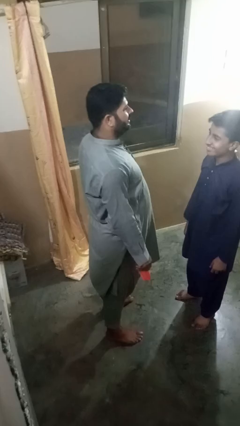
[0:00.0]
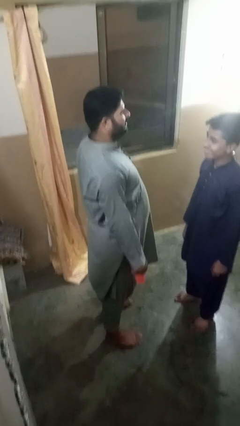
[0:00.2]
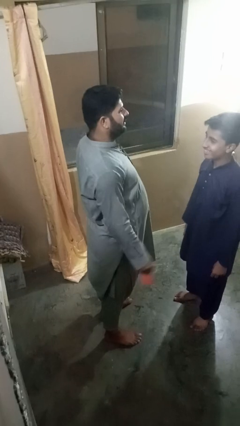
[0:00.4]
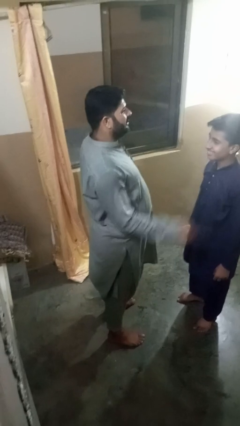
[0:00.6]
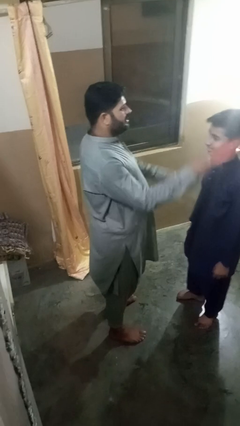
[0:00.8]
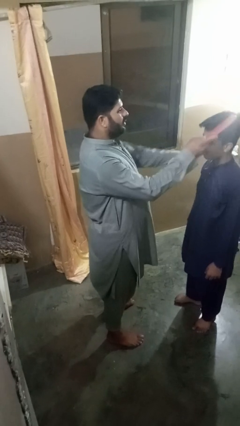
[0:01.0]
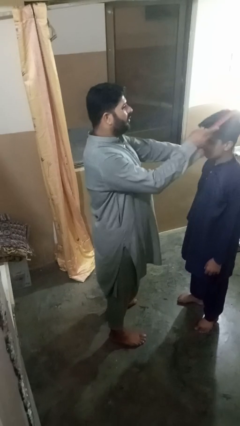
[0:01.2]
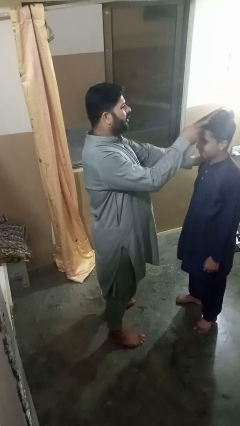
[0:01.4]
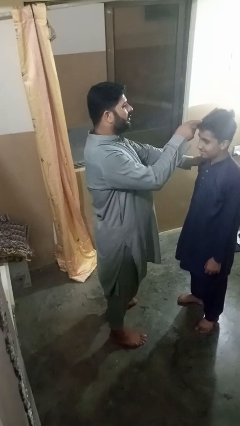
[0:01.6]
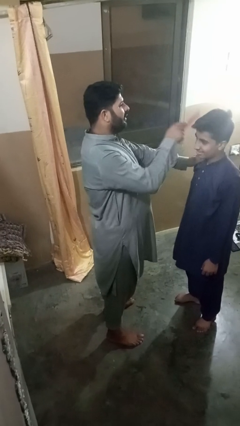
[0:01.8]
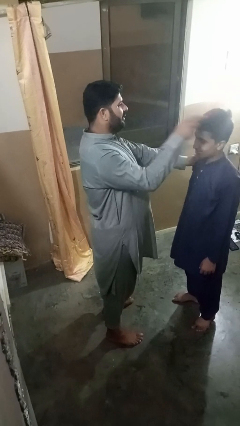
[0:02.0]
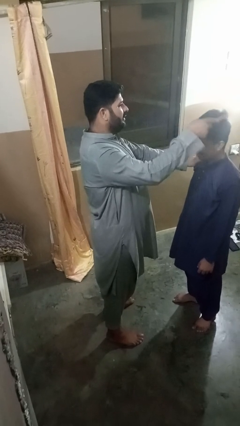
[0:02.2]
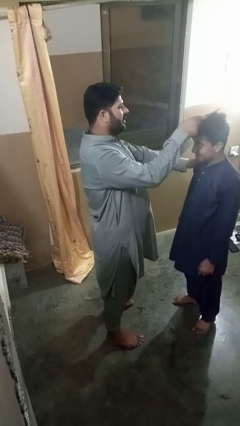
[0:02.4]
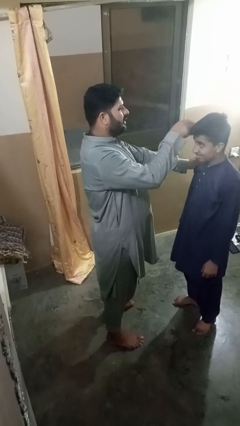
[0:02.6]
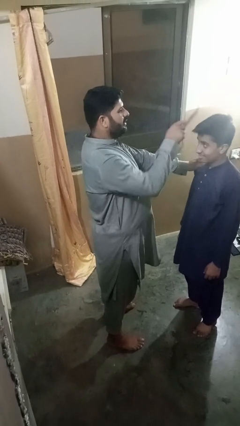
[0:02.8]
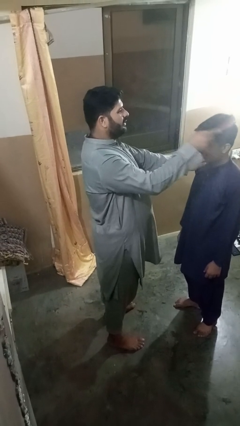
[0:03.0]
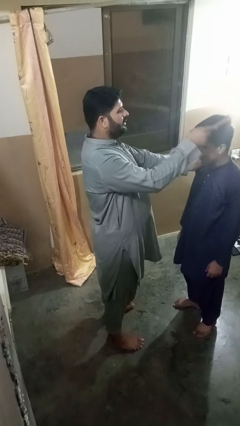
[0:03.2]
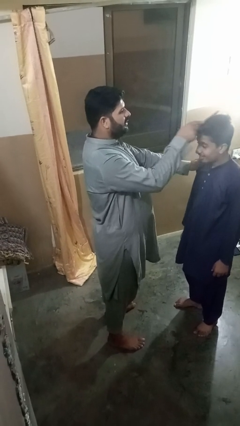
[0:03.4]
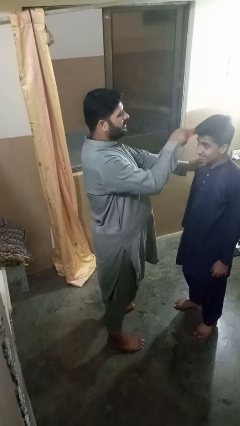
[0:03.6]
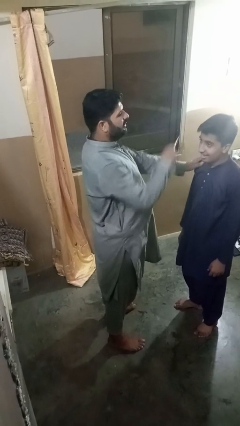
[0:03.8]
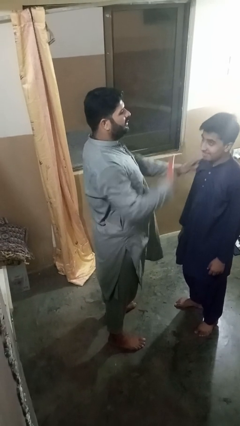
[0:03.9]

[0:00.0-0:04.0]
person brushes hair of person

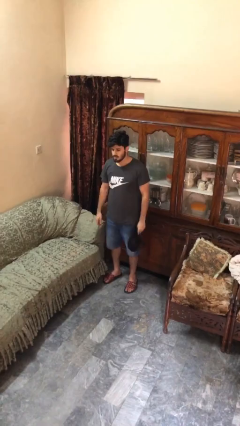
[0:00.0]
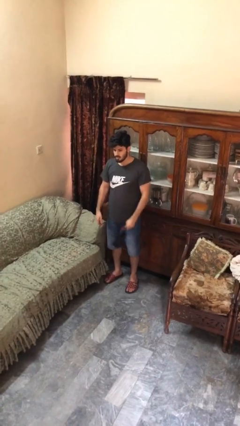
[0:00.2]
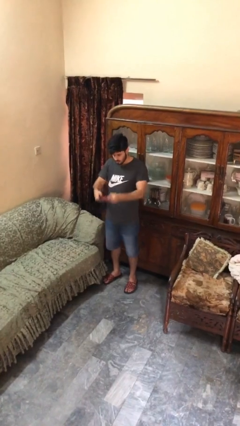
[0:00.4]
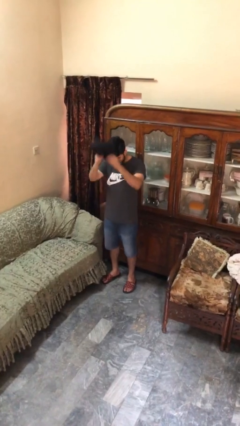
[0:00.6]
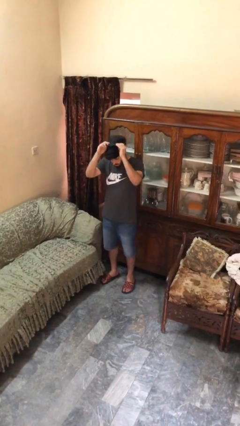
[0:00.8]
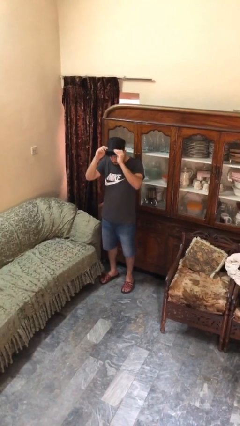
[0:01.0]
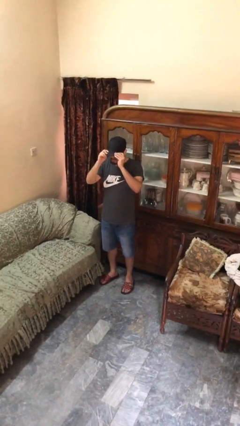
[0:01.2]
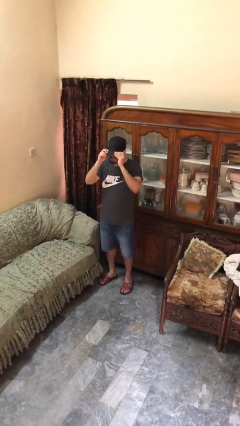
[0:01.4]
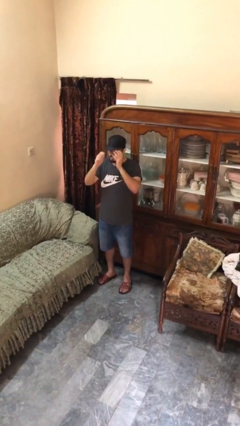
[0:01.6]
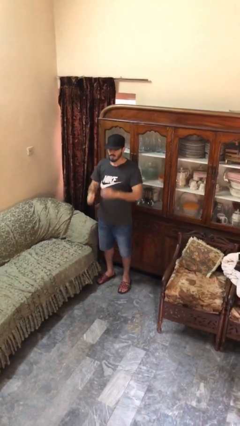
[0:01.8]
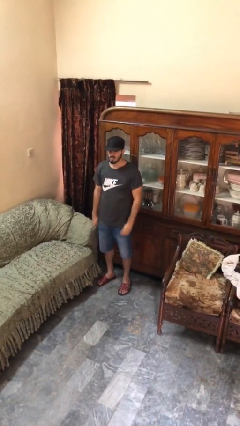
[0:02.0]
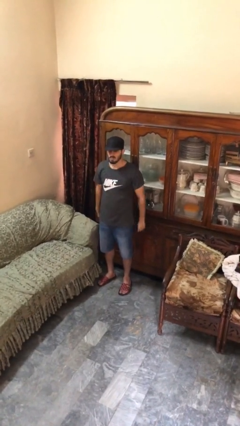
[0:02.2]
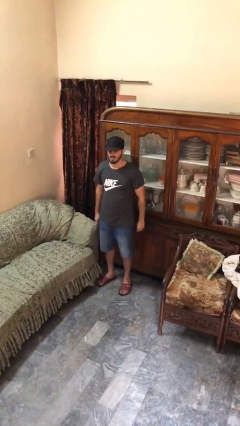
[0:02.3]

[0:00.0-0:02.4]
person puts on hat

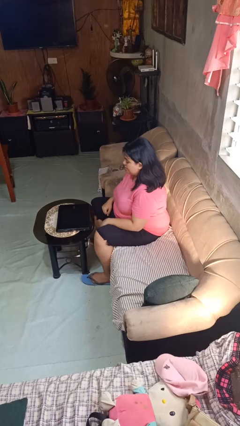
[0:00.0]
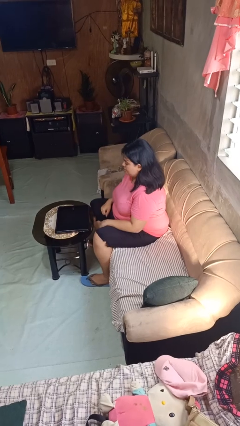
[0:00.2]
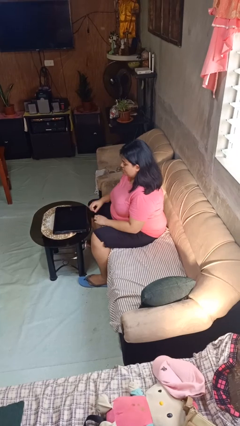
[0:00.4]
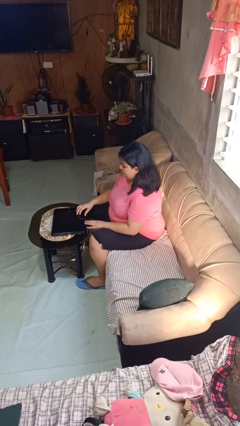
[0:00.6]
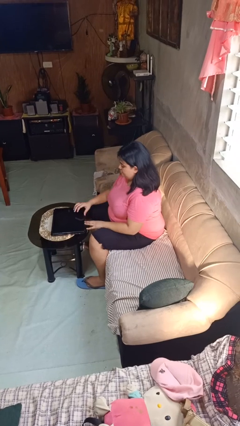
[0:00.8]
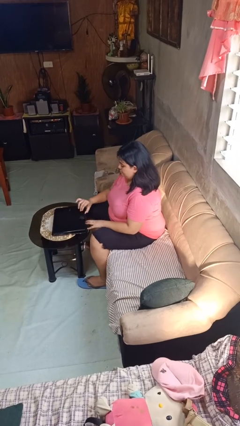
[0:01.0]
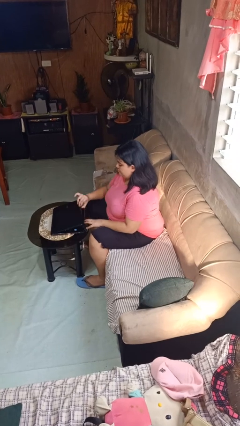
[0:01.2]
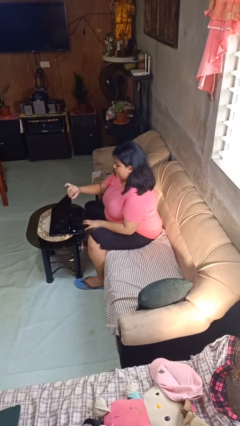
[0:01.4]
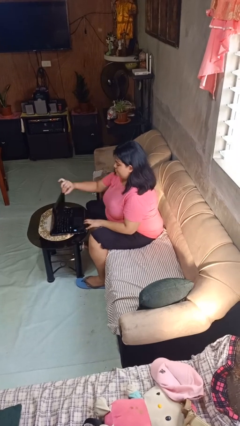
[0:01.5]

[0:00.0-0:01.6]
person opens laptop

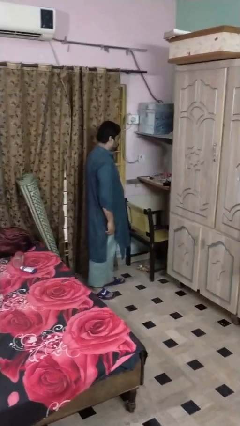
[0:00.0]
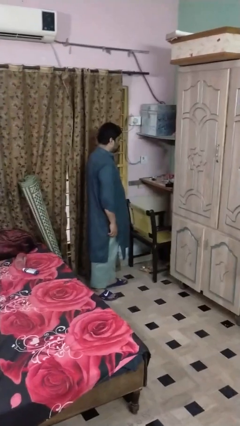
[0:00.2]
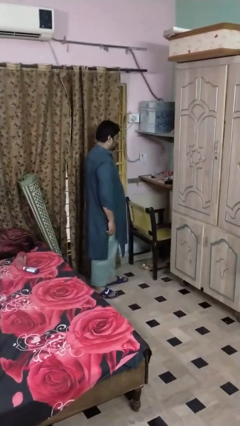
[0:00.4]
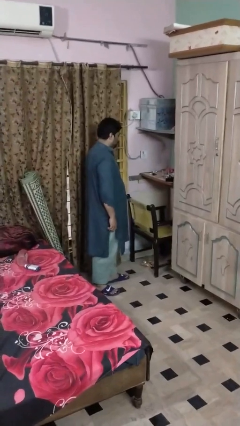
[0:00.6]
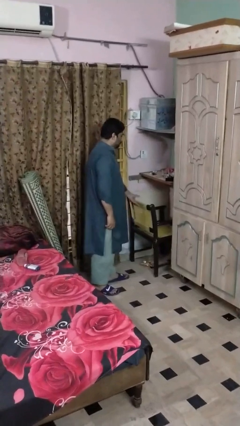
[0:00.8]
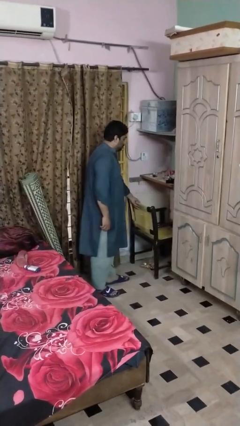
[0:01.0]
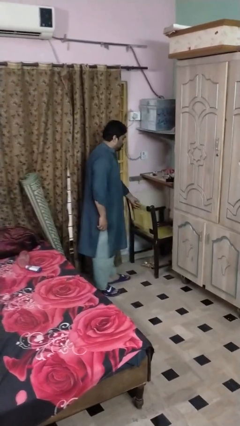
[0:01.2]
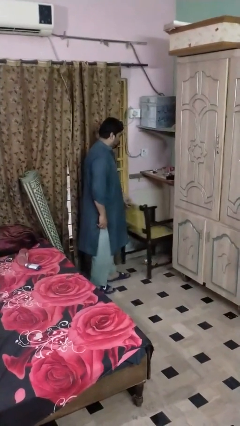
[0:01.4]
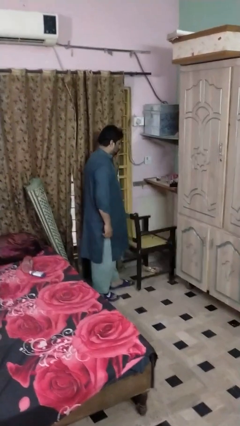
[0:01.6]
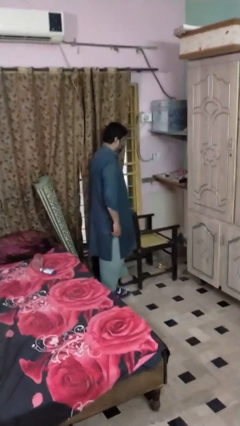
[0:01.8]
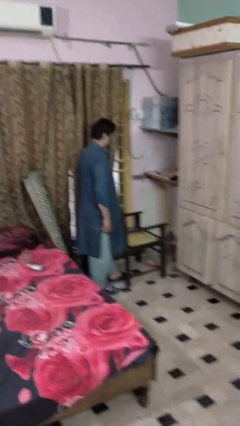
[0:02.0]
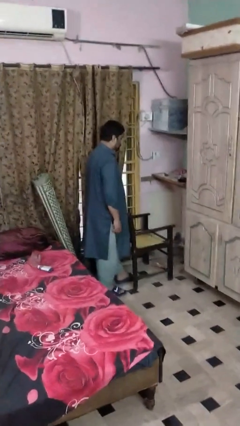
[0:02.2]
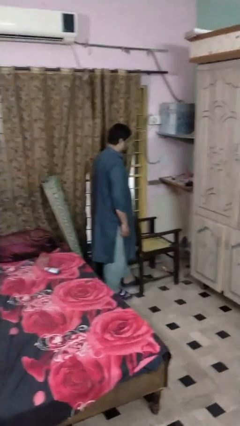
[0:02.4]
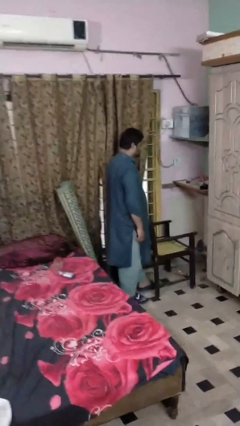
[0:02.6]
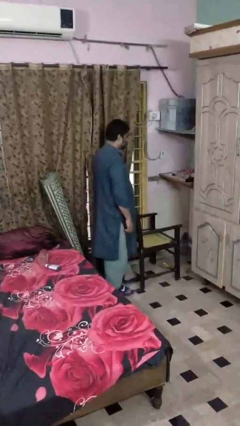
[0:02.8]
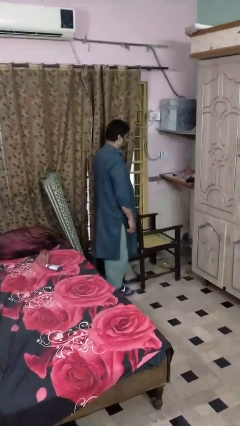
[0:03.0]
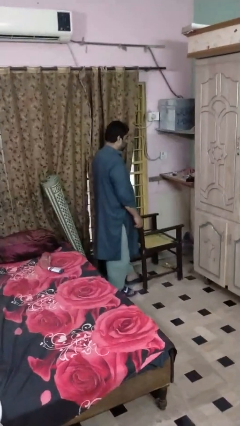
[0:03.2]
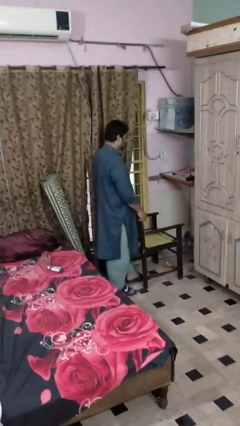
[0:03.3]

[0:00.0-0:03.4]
person pulls out chair

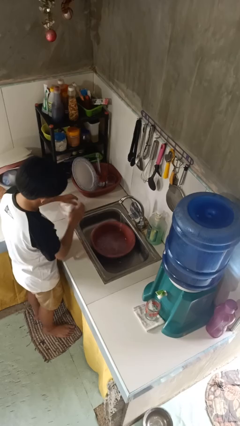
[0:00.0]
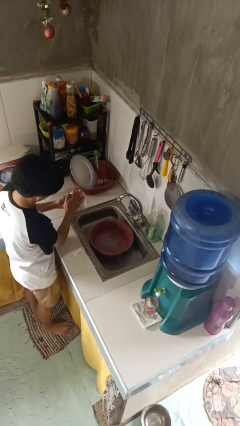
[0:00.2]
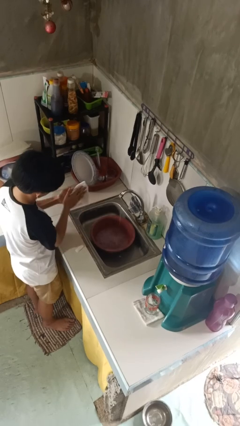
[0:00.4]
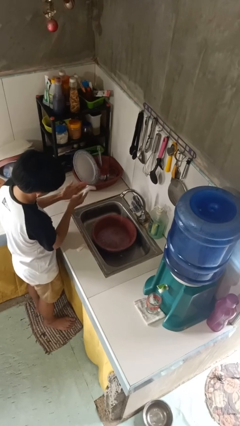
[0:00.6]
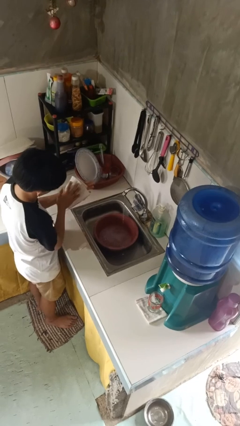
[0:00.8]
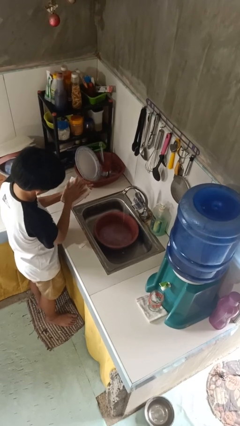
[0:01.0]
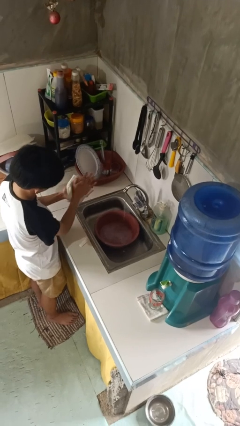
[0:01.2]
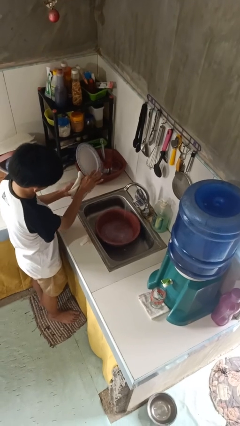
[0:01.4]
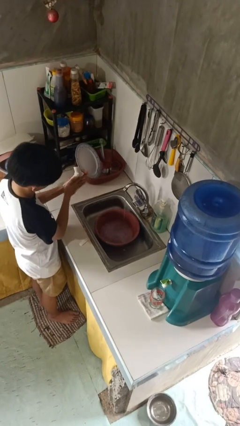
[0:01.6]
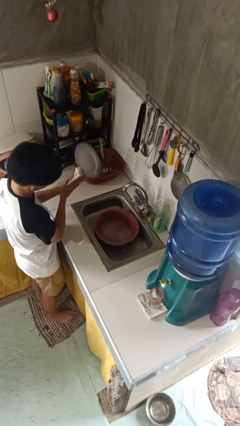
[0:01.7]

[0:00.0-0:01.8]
person dries hands with towel

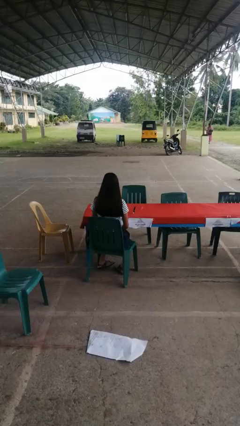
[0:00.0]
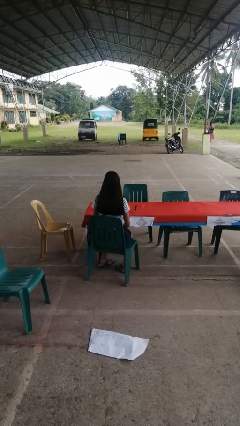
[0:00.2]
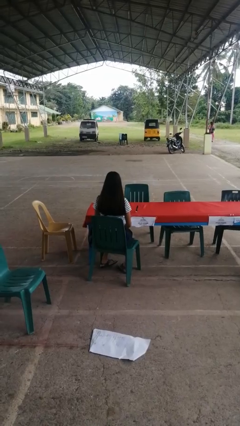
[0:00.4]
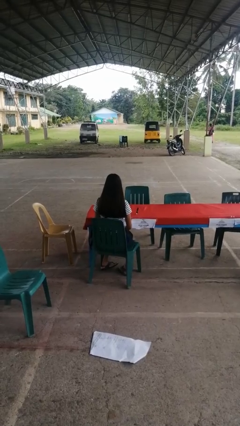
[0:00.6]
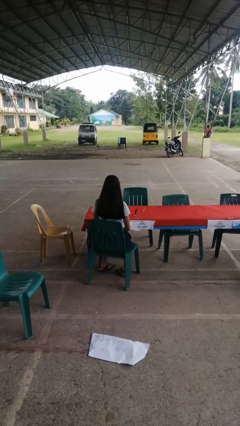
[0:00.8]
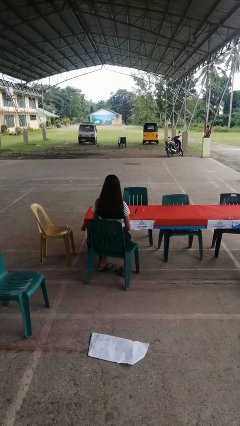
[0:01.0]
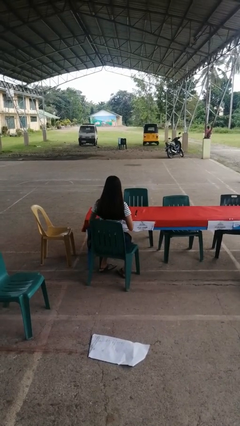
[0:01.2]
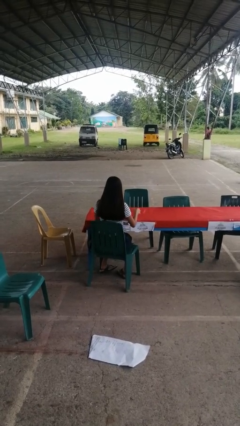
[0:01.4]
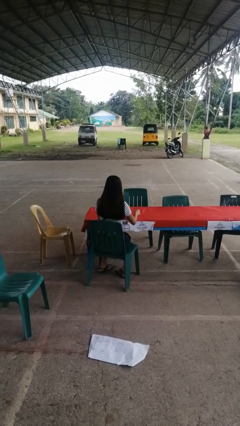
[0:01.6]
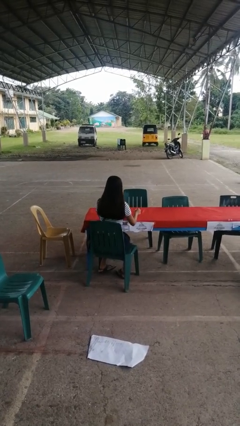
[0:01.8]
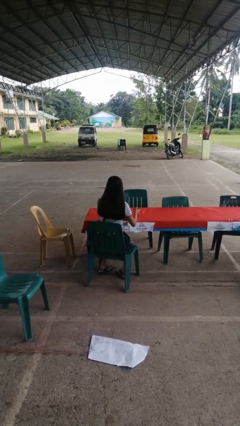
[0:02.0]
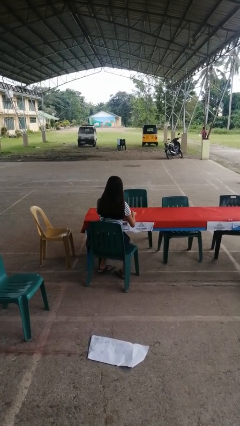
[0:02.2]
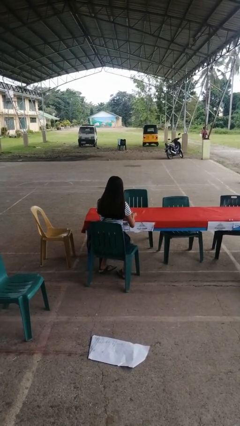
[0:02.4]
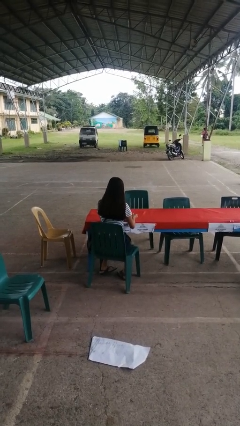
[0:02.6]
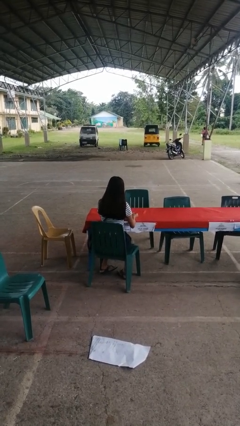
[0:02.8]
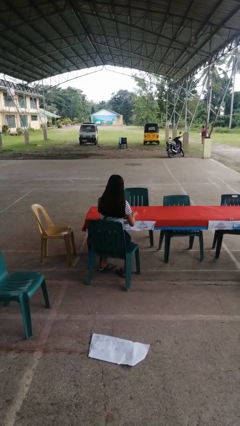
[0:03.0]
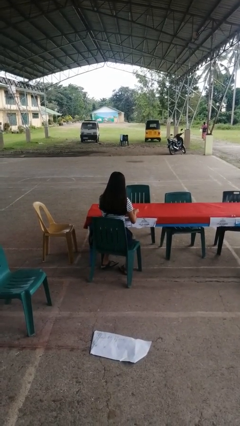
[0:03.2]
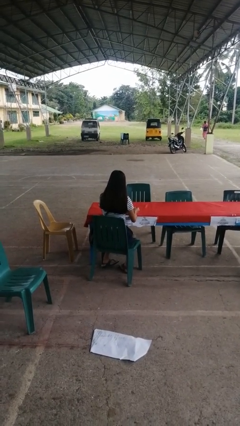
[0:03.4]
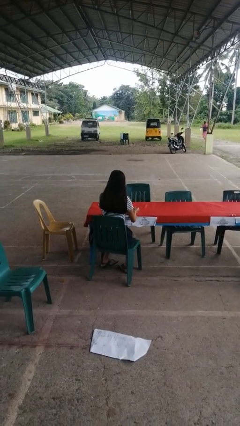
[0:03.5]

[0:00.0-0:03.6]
person paints fingernails

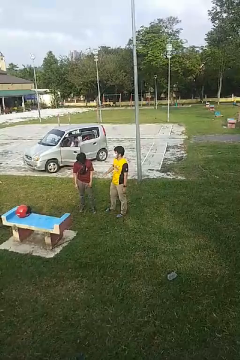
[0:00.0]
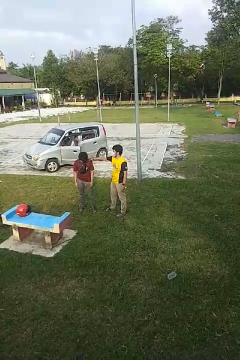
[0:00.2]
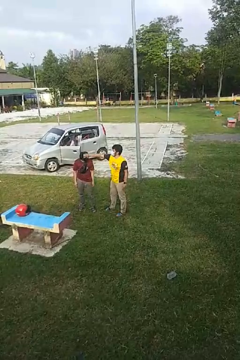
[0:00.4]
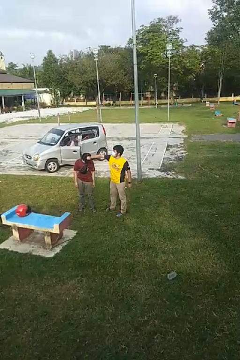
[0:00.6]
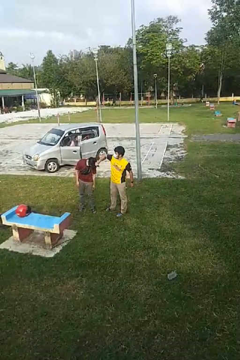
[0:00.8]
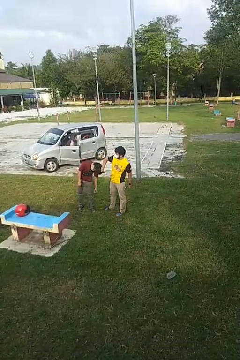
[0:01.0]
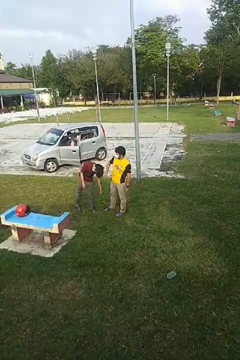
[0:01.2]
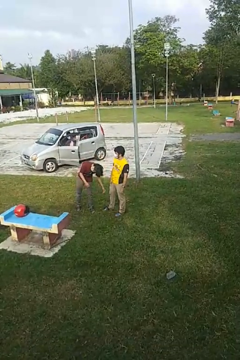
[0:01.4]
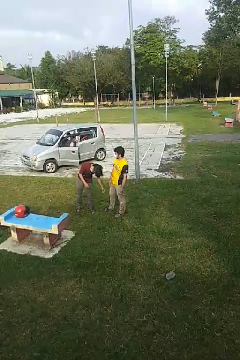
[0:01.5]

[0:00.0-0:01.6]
person grabs person by hair
